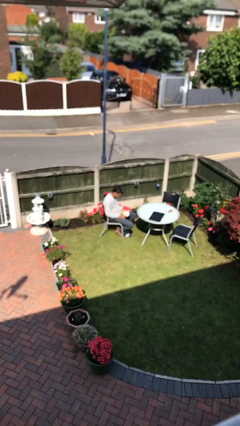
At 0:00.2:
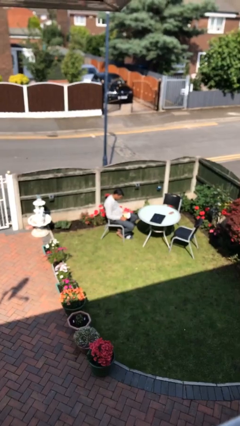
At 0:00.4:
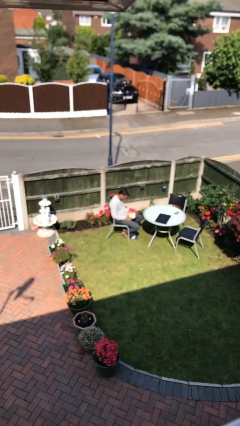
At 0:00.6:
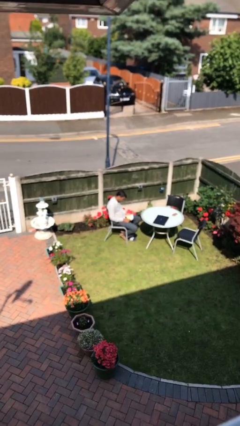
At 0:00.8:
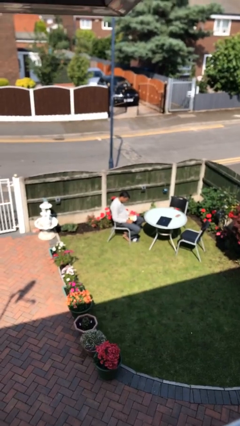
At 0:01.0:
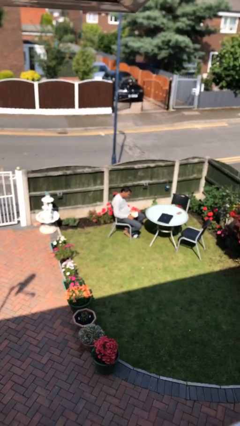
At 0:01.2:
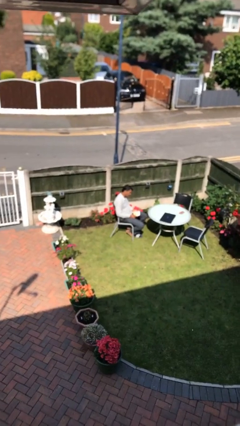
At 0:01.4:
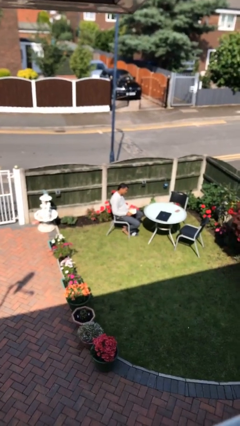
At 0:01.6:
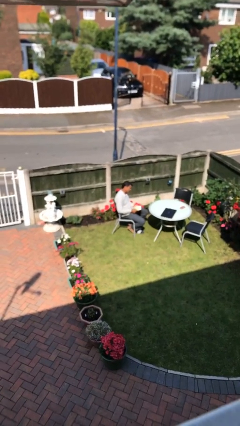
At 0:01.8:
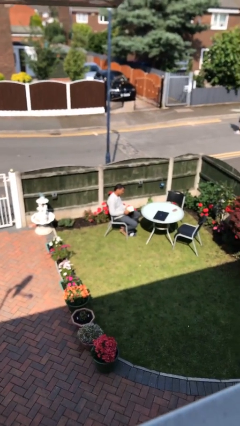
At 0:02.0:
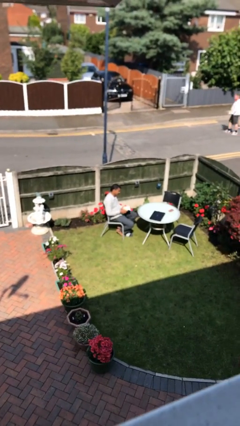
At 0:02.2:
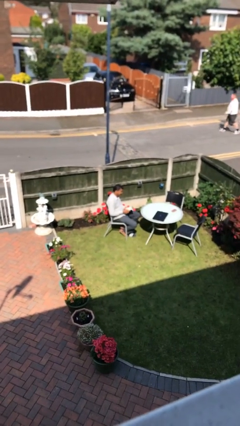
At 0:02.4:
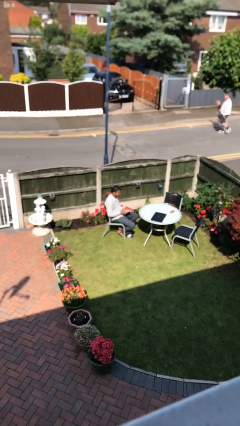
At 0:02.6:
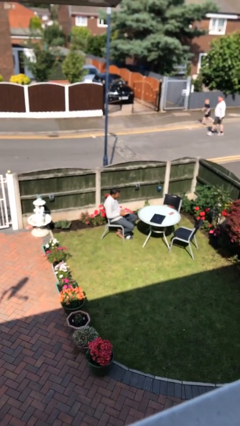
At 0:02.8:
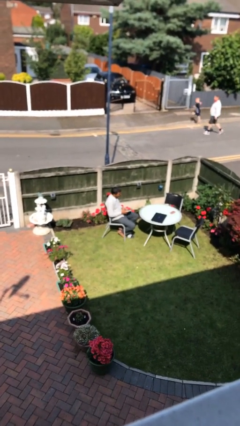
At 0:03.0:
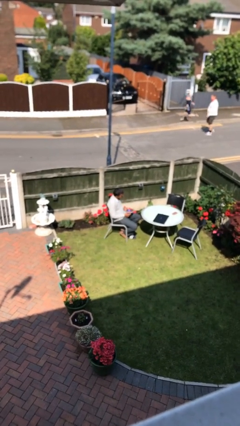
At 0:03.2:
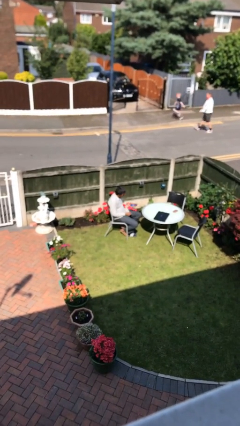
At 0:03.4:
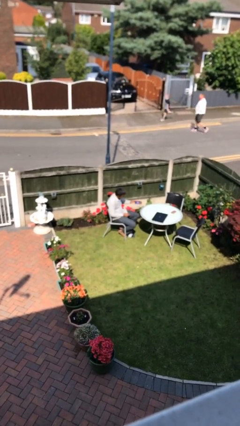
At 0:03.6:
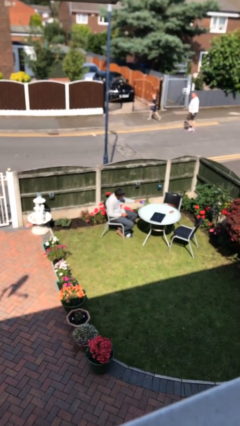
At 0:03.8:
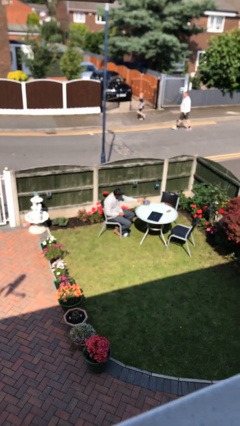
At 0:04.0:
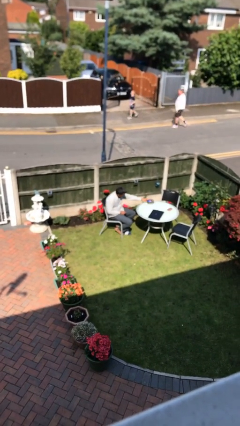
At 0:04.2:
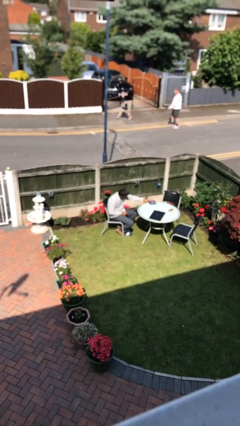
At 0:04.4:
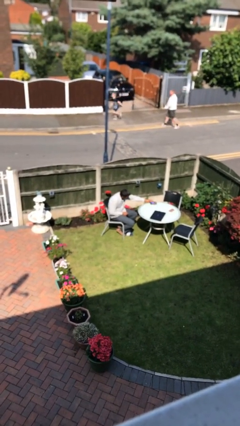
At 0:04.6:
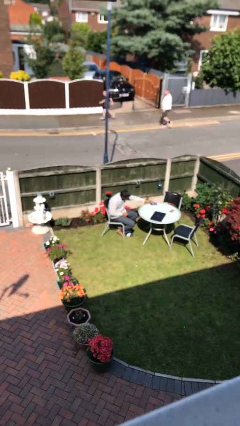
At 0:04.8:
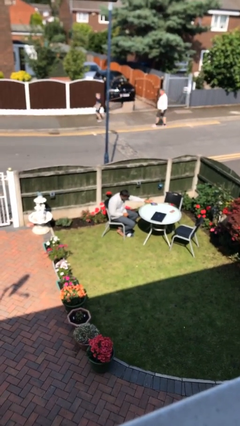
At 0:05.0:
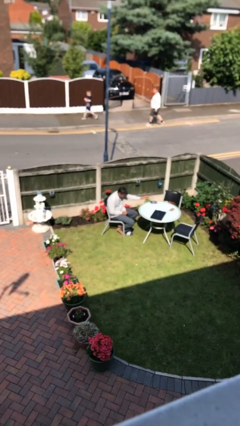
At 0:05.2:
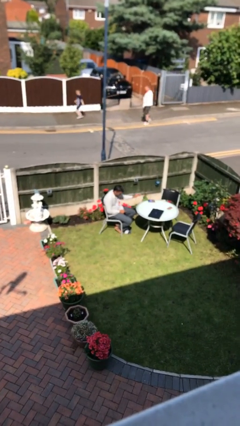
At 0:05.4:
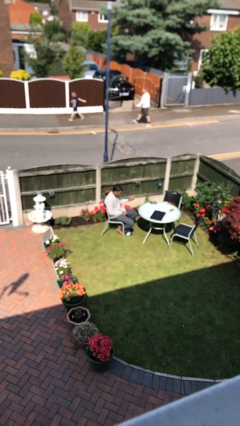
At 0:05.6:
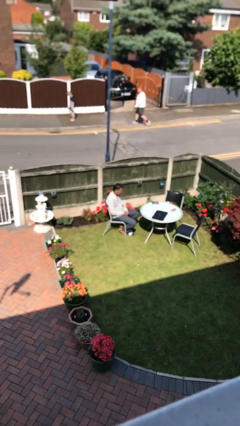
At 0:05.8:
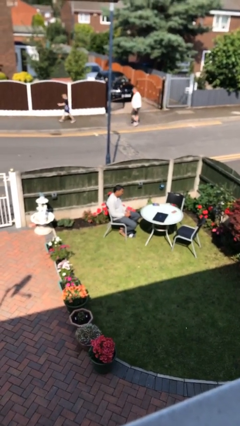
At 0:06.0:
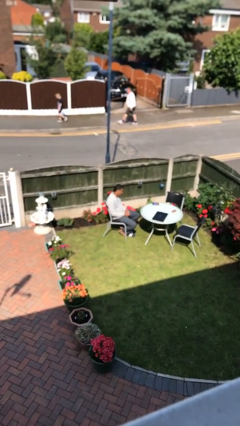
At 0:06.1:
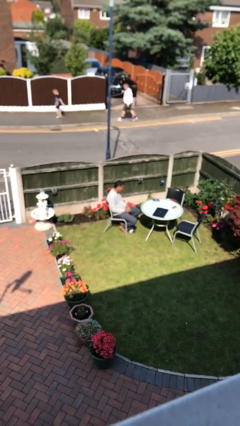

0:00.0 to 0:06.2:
person puts down object on table

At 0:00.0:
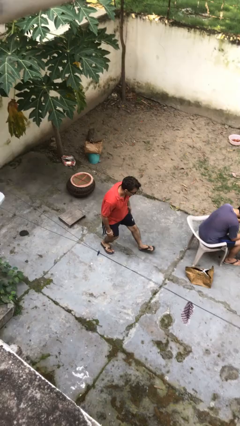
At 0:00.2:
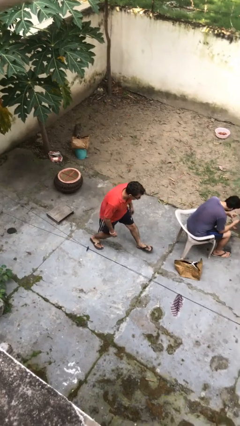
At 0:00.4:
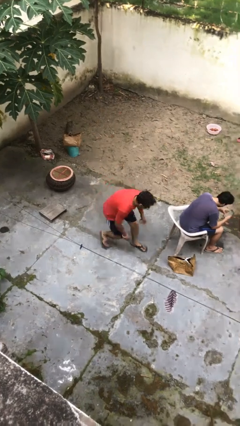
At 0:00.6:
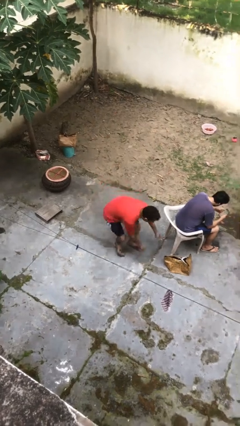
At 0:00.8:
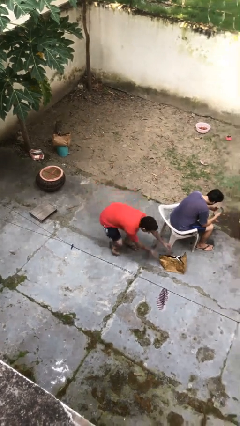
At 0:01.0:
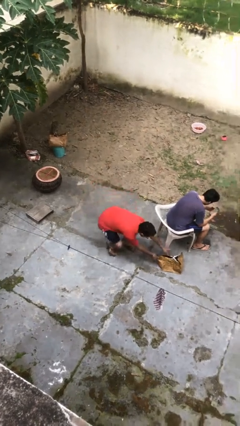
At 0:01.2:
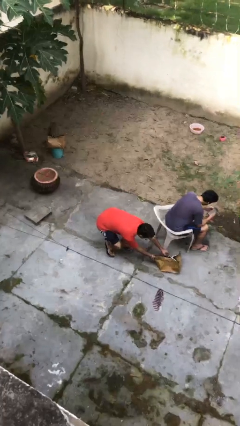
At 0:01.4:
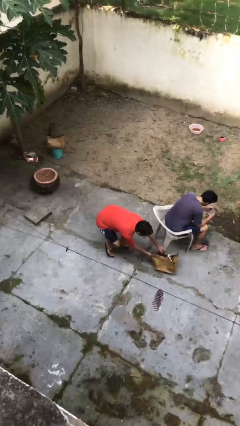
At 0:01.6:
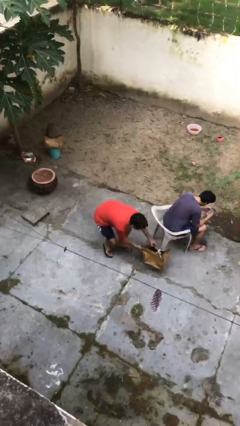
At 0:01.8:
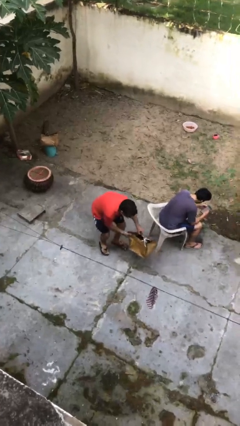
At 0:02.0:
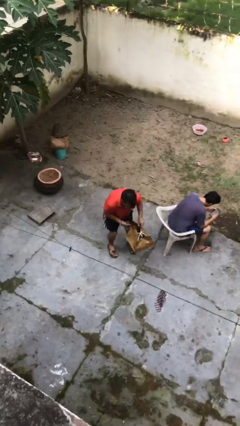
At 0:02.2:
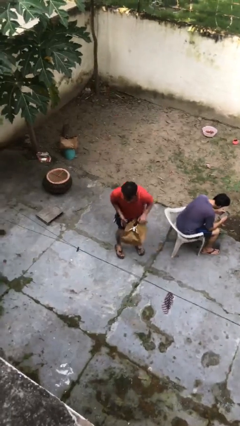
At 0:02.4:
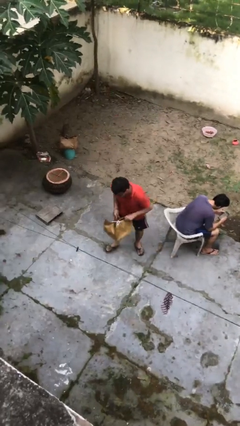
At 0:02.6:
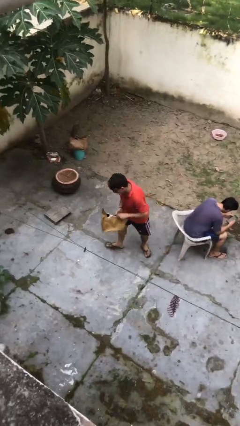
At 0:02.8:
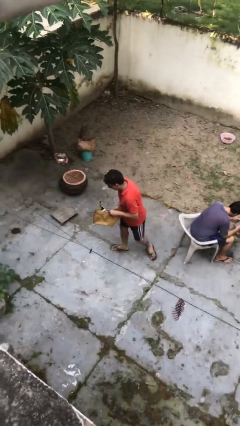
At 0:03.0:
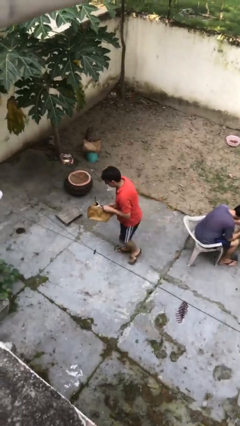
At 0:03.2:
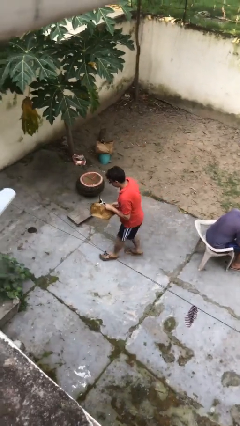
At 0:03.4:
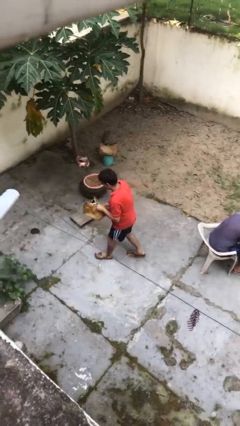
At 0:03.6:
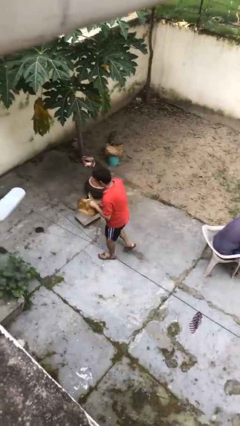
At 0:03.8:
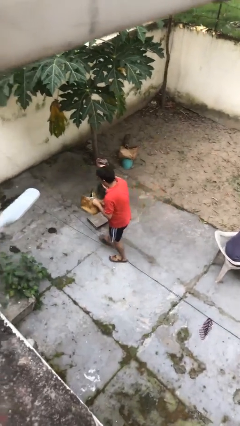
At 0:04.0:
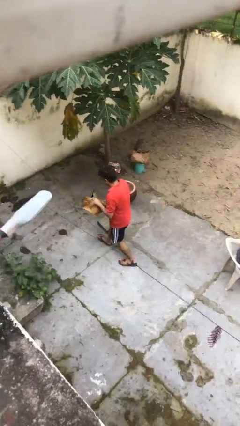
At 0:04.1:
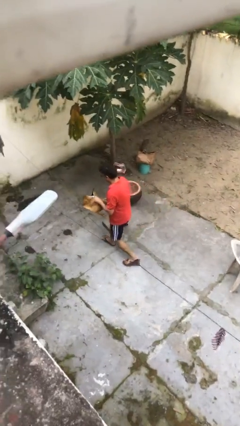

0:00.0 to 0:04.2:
person steals object from person

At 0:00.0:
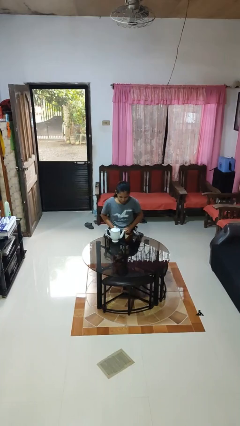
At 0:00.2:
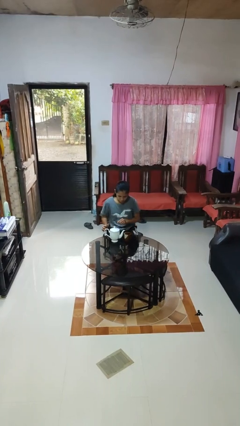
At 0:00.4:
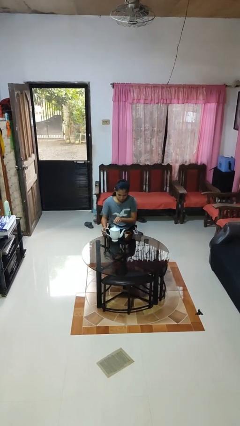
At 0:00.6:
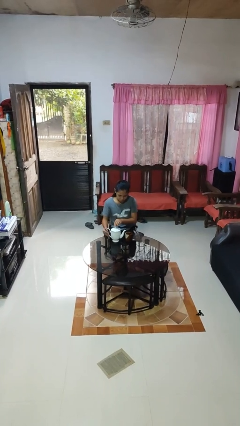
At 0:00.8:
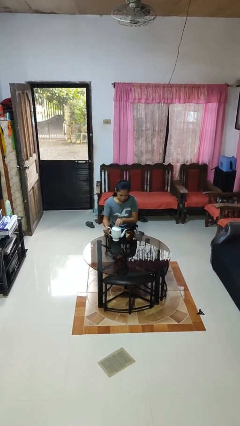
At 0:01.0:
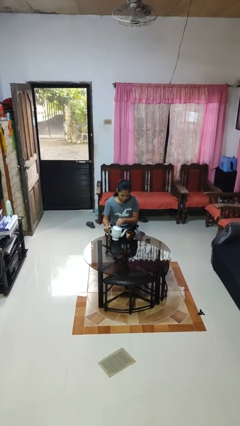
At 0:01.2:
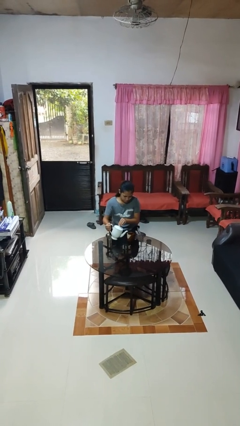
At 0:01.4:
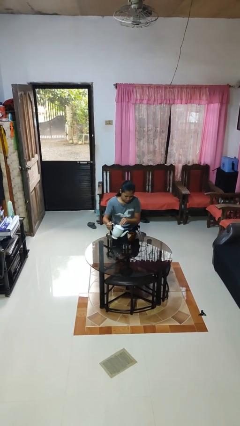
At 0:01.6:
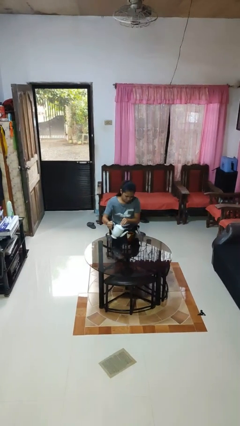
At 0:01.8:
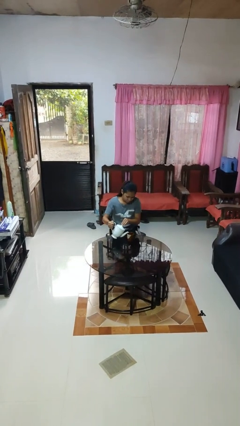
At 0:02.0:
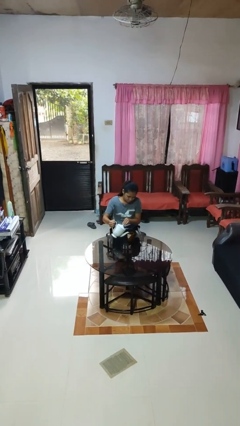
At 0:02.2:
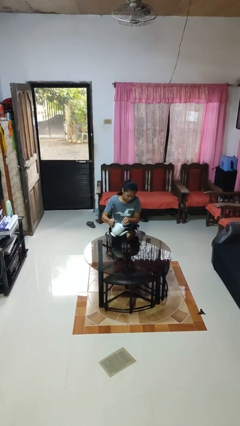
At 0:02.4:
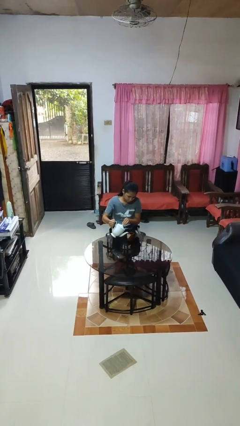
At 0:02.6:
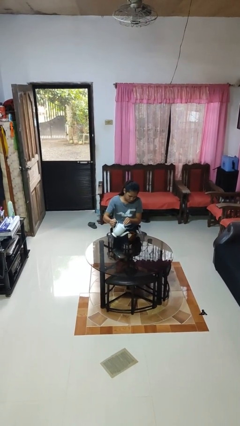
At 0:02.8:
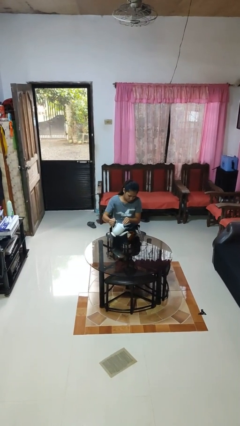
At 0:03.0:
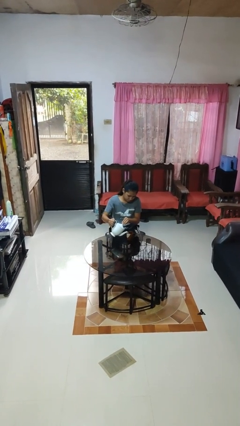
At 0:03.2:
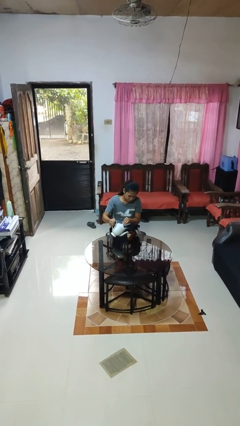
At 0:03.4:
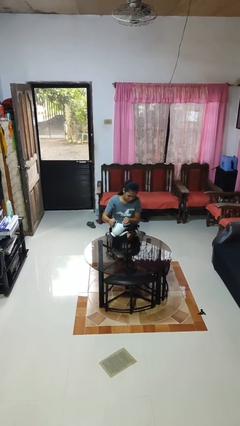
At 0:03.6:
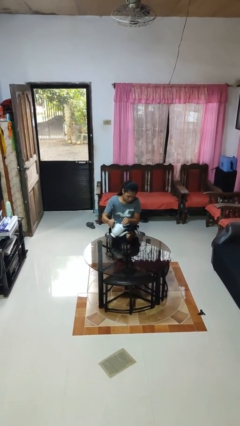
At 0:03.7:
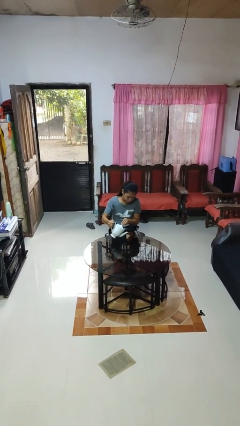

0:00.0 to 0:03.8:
person pours coffee into mug

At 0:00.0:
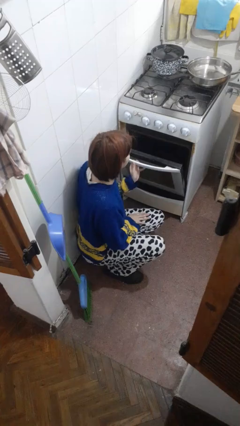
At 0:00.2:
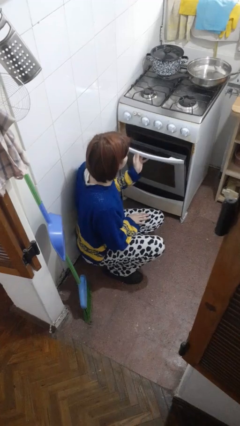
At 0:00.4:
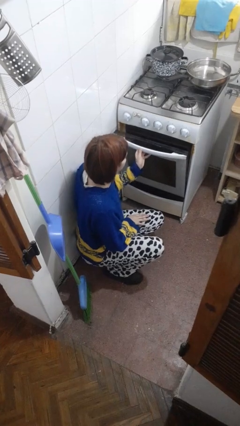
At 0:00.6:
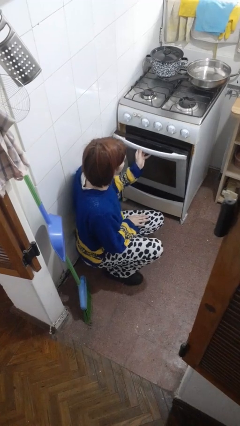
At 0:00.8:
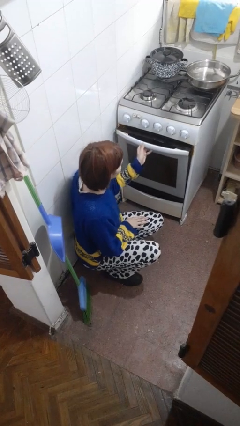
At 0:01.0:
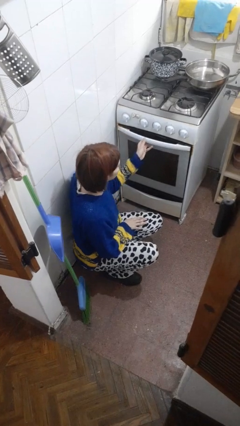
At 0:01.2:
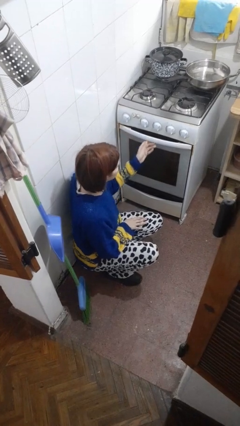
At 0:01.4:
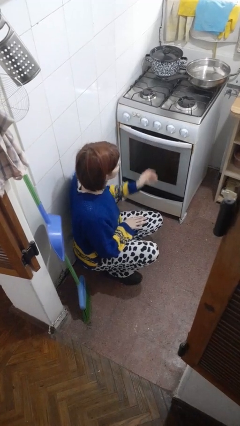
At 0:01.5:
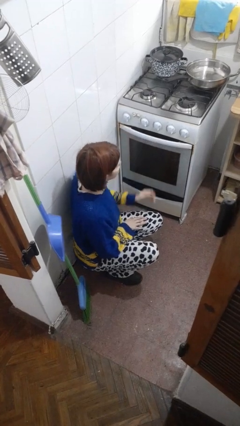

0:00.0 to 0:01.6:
person closes oven door

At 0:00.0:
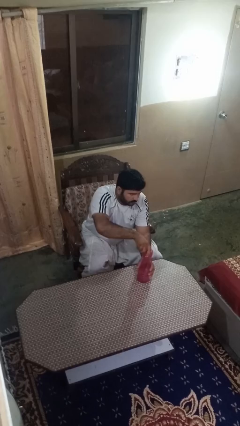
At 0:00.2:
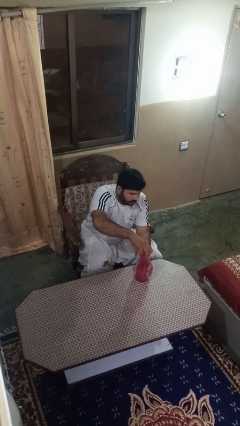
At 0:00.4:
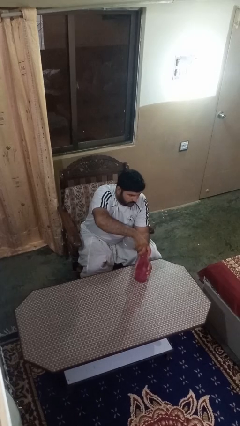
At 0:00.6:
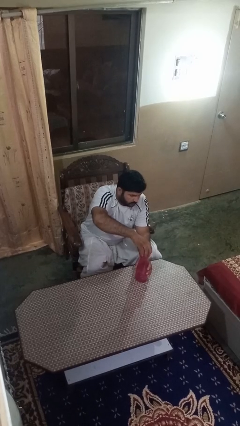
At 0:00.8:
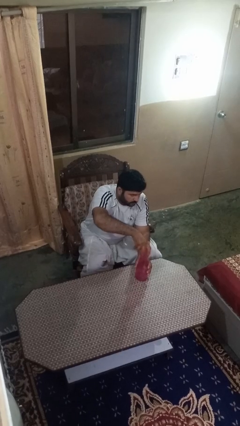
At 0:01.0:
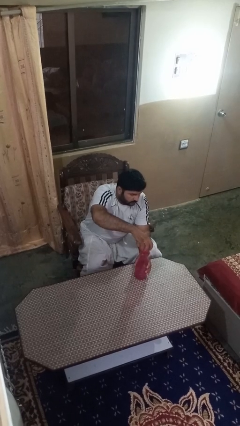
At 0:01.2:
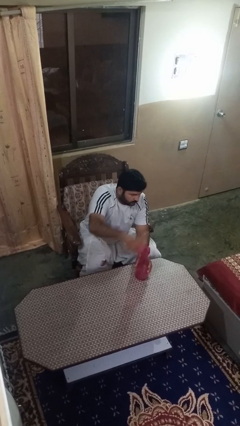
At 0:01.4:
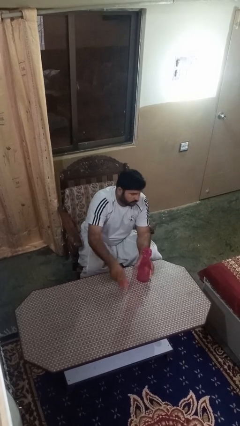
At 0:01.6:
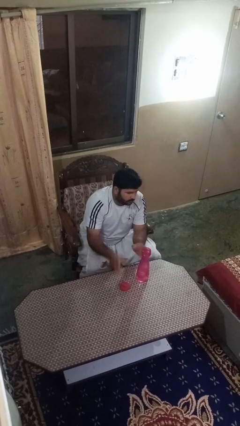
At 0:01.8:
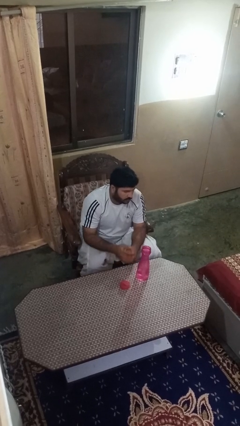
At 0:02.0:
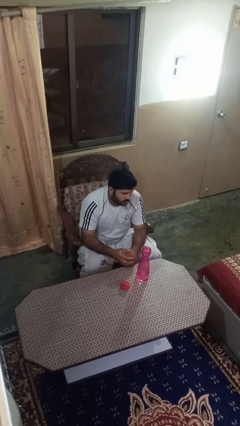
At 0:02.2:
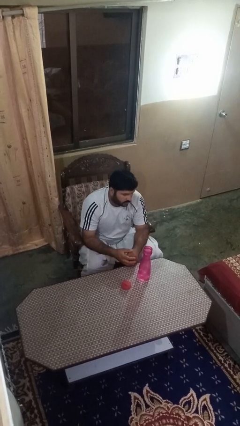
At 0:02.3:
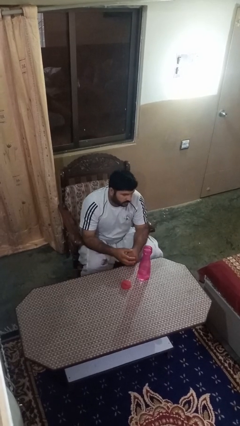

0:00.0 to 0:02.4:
person unscrews lid from bottle
